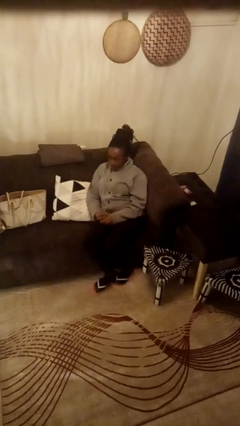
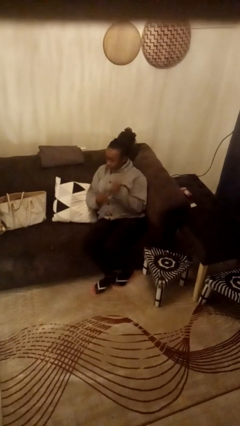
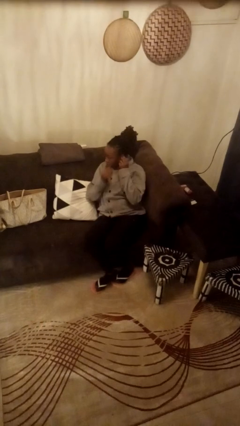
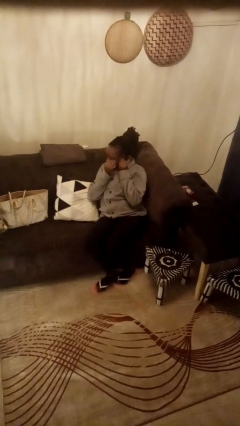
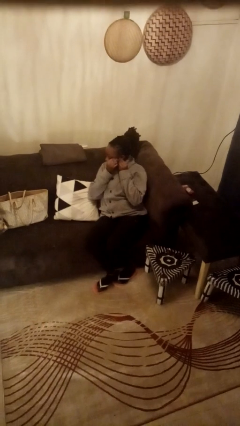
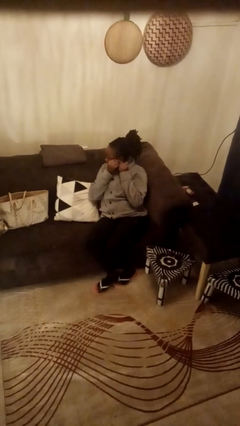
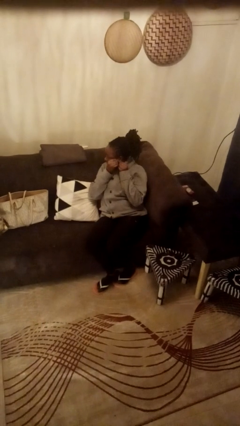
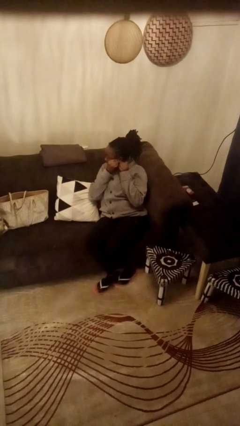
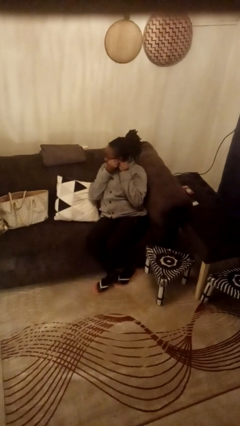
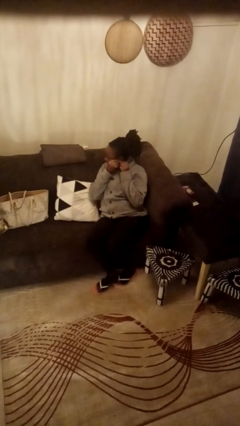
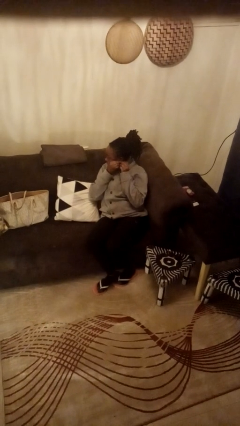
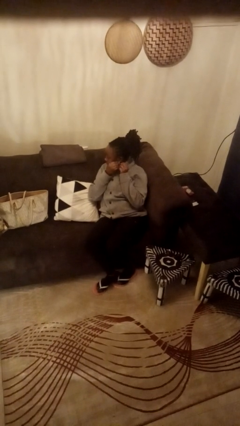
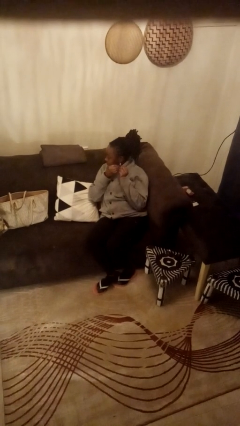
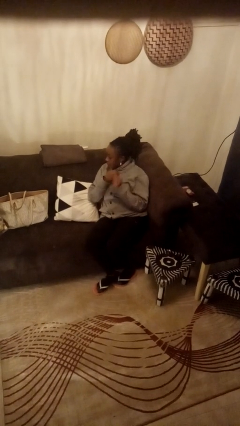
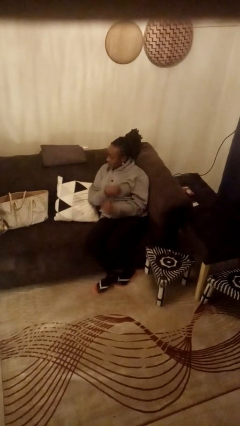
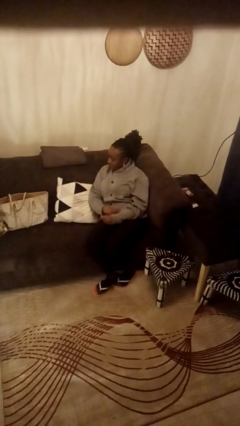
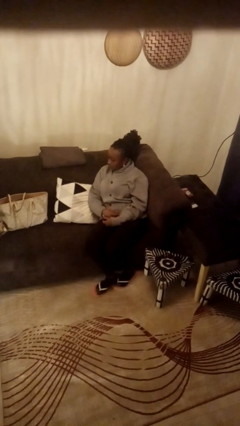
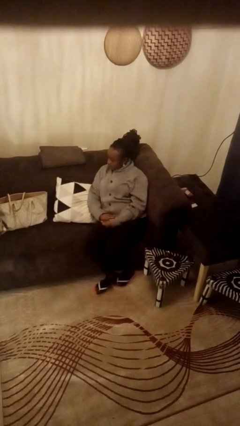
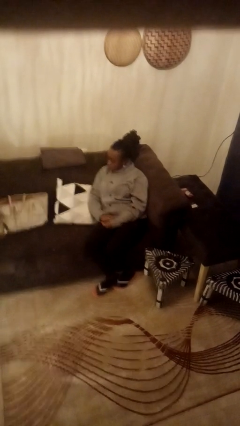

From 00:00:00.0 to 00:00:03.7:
person puts on earrings

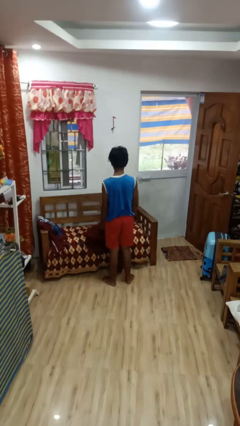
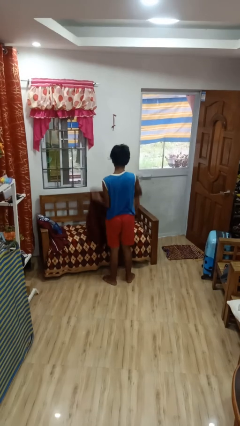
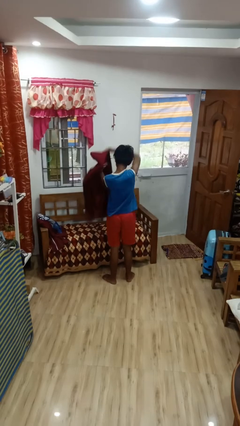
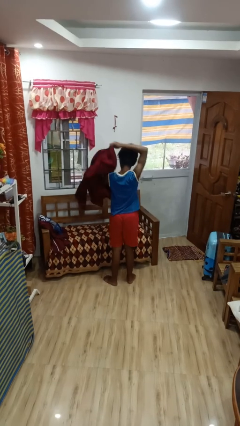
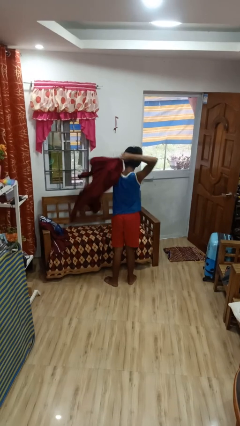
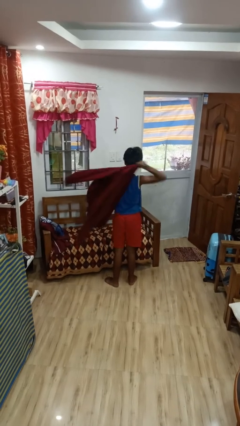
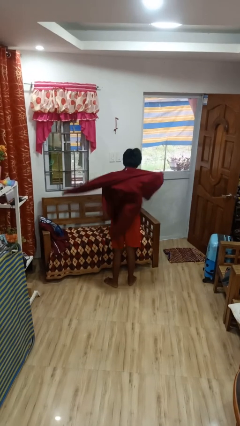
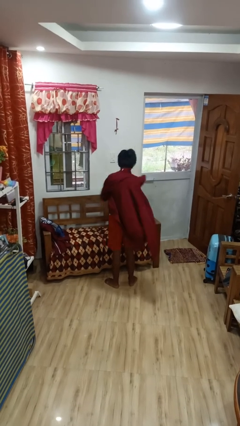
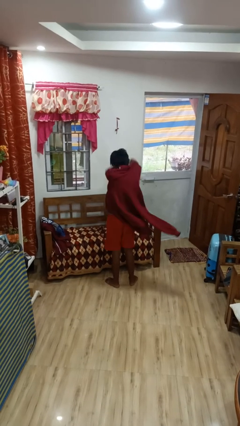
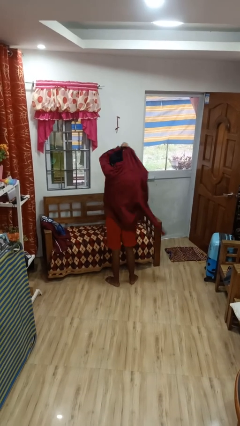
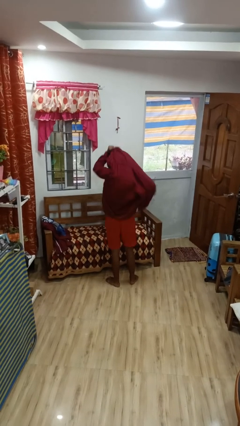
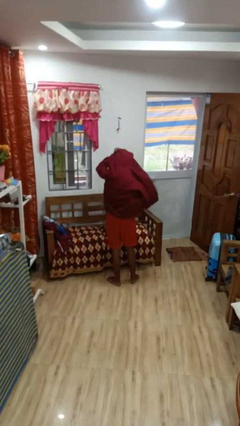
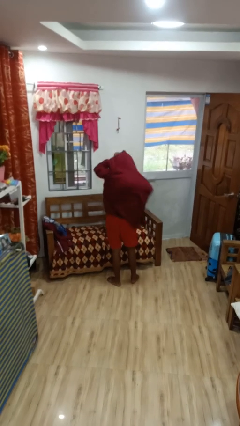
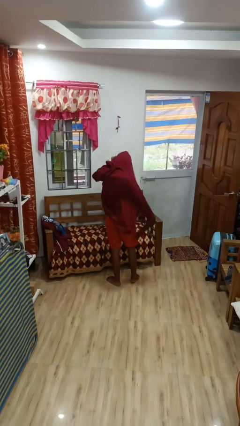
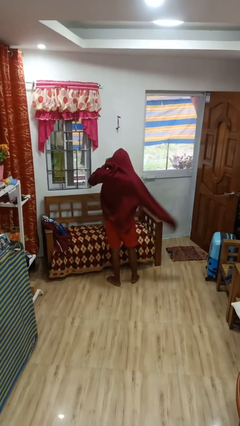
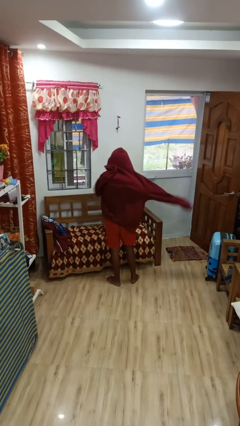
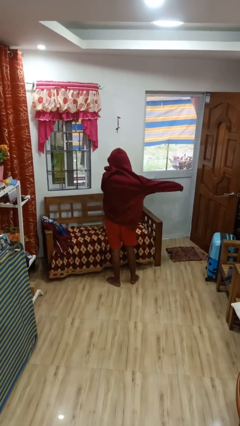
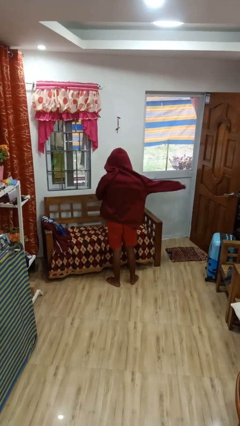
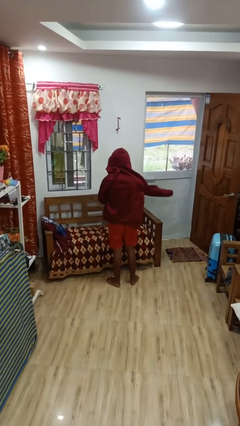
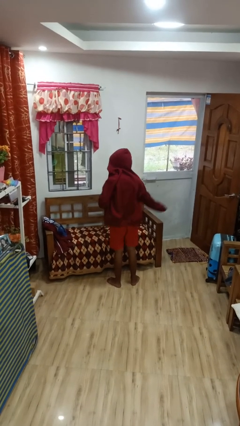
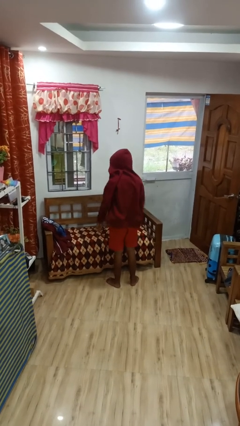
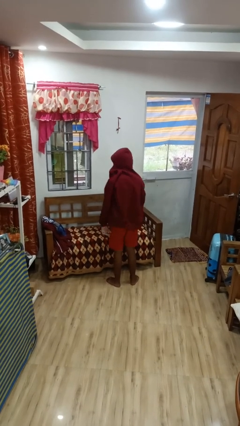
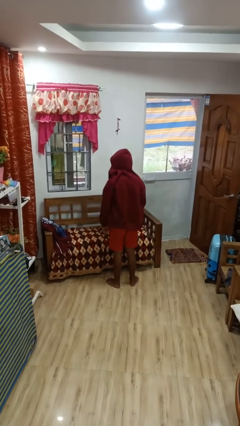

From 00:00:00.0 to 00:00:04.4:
person puts on hoodie

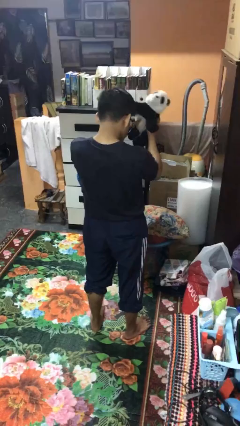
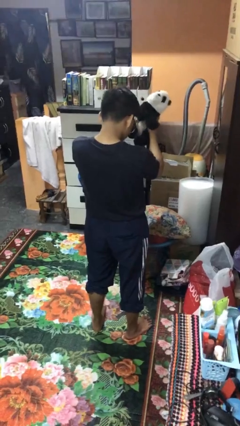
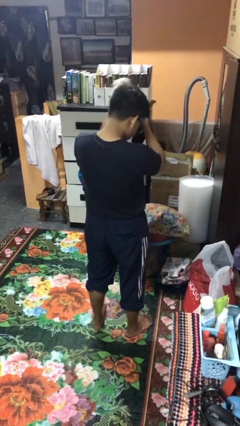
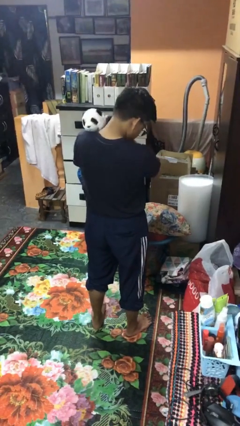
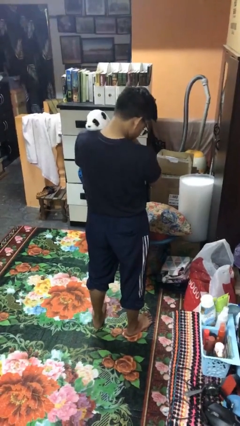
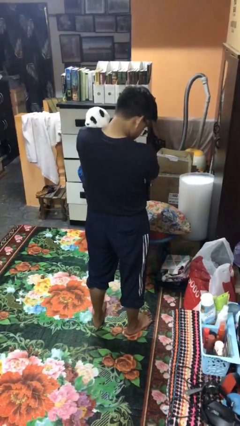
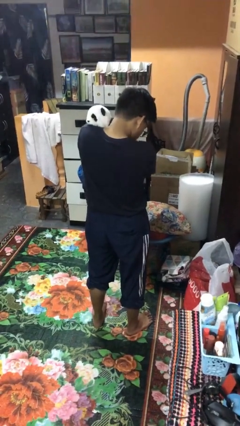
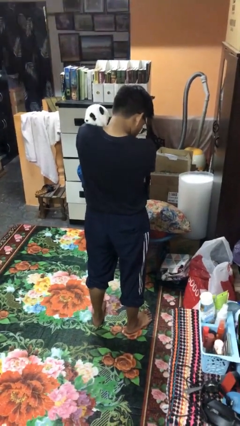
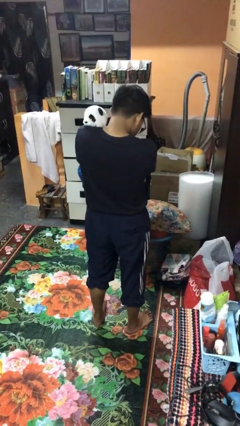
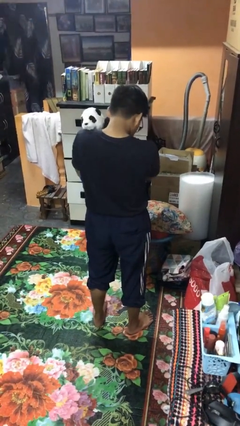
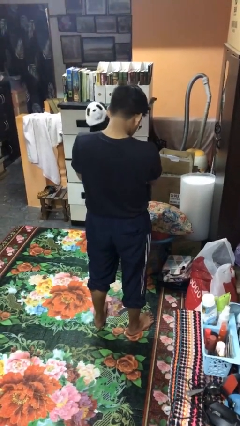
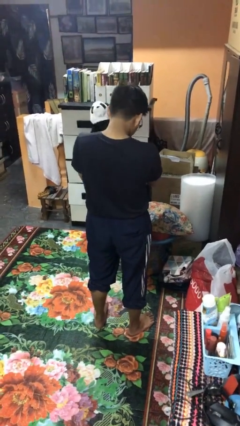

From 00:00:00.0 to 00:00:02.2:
person hugs stuffed animal

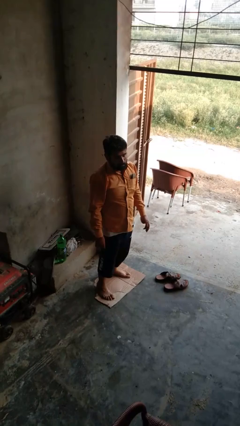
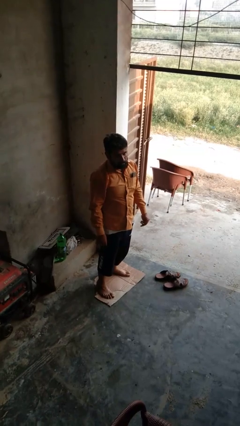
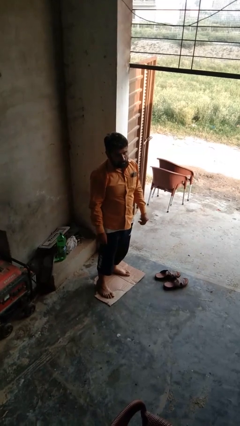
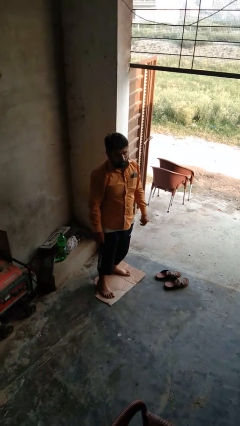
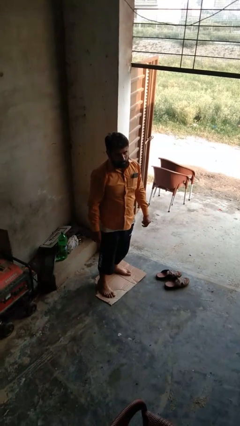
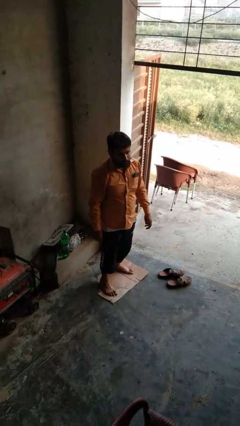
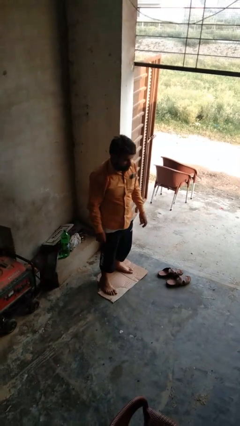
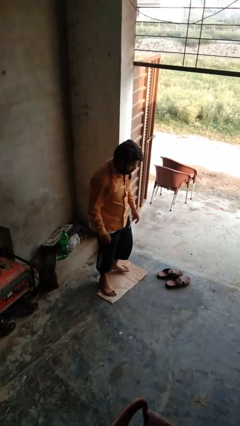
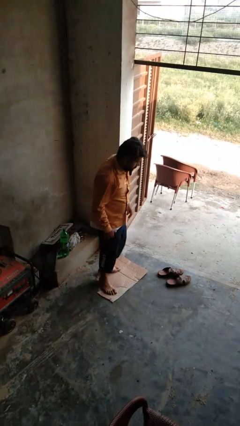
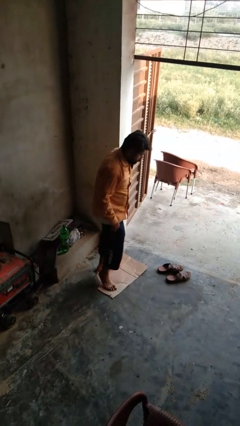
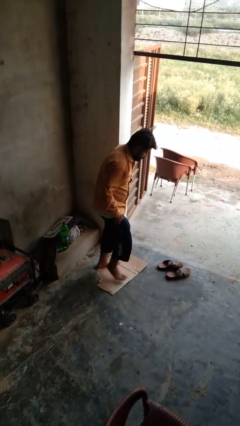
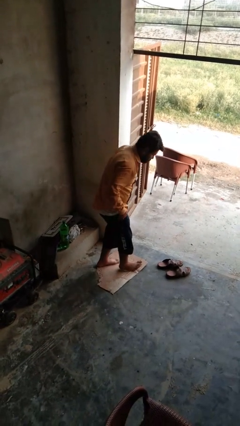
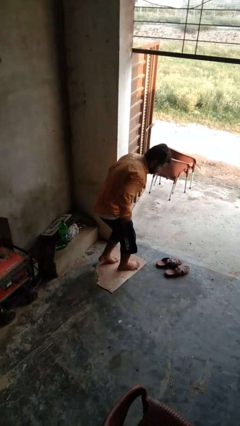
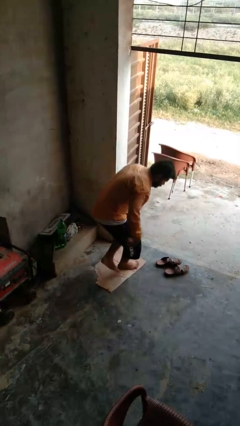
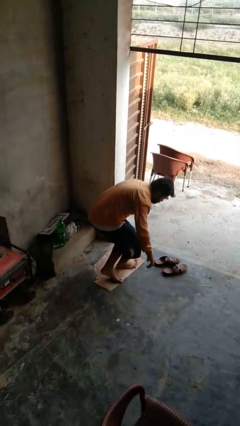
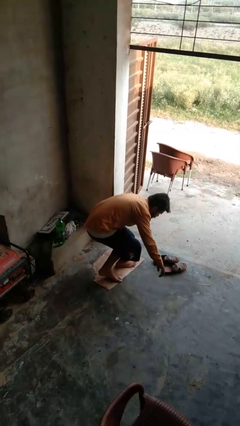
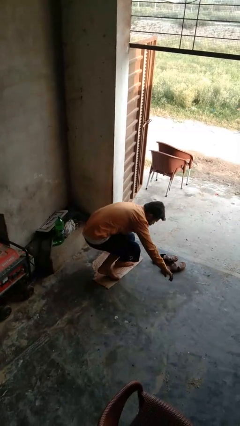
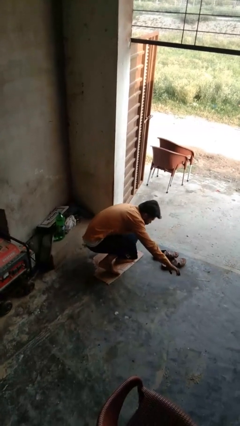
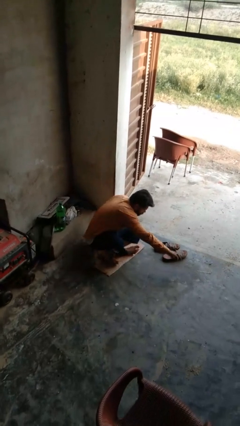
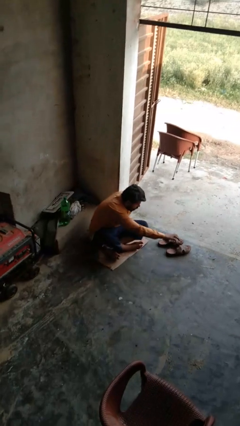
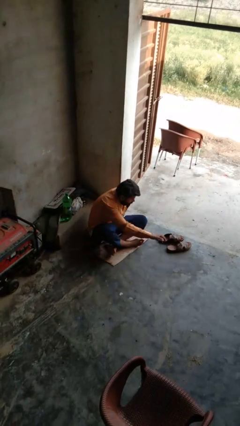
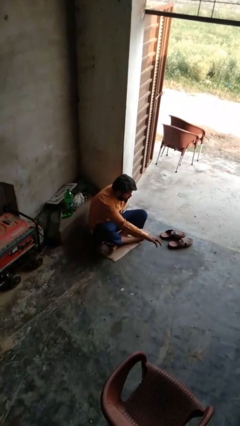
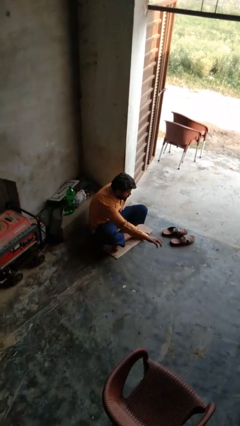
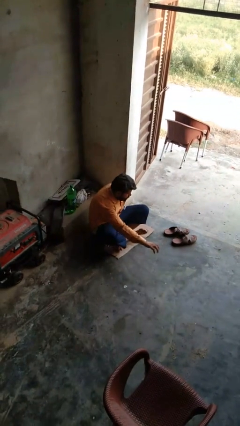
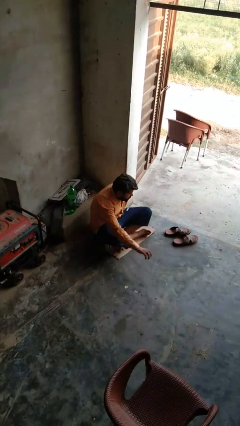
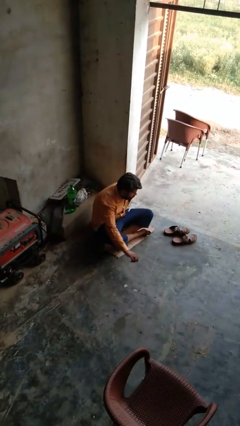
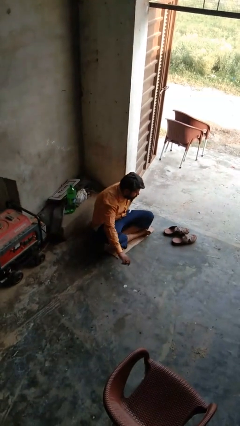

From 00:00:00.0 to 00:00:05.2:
person sits crisscross

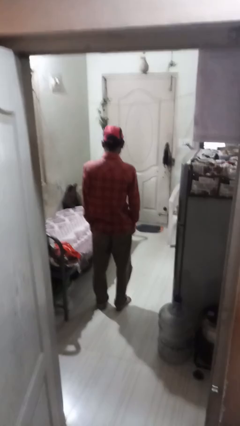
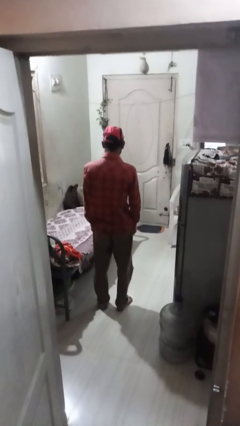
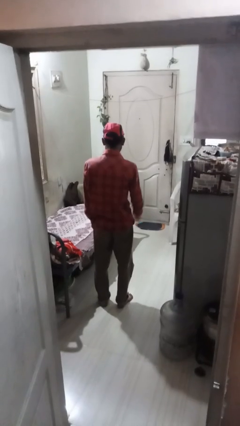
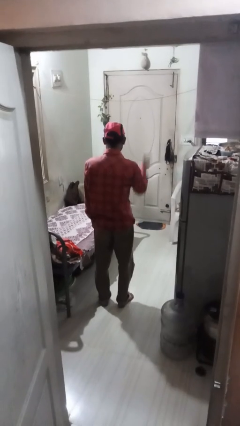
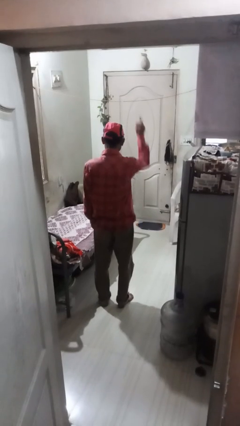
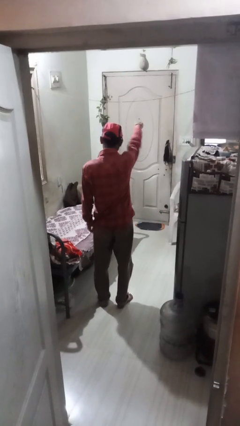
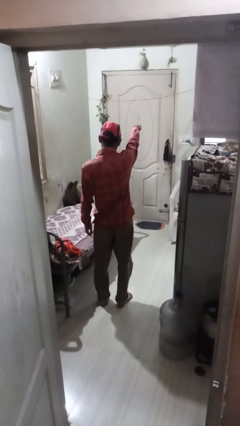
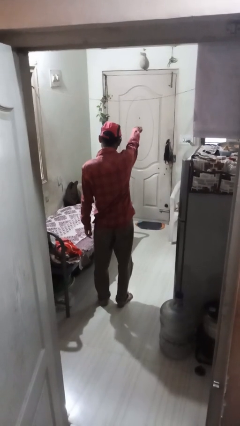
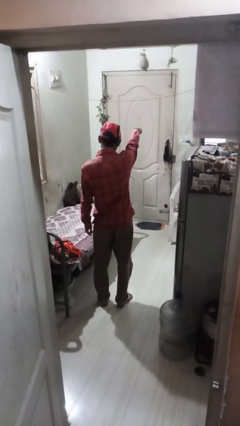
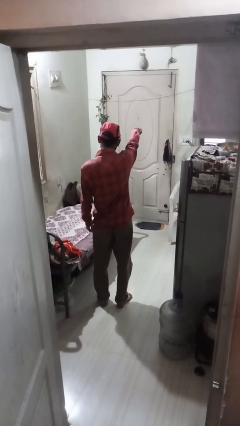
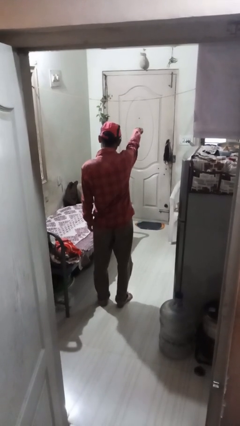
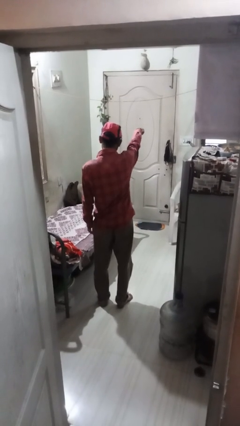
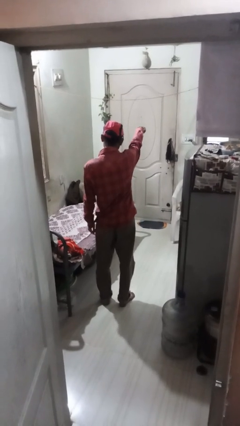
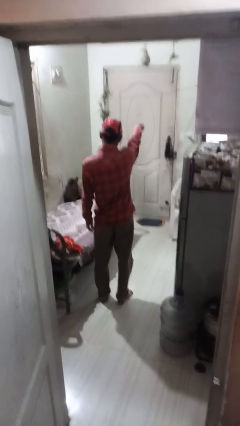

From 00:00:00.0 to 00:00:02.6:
person points at person
